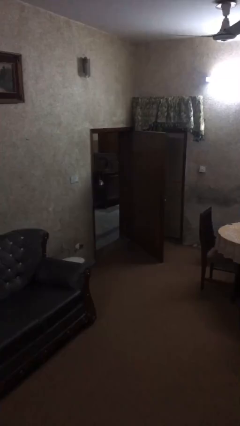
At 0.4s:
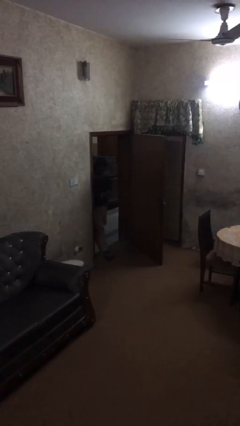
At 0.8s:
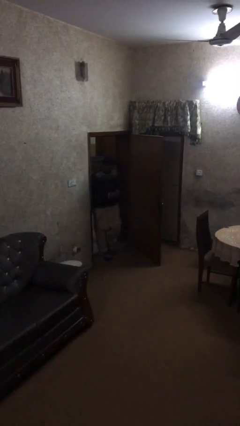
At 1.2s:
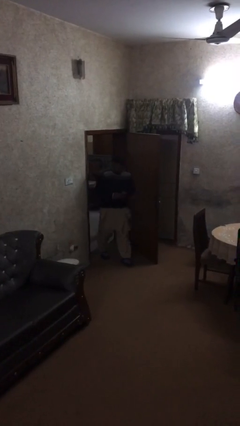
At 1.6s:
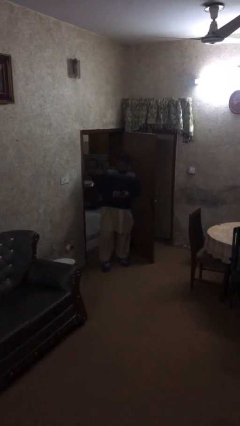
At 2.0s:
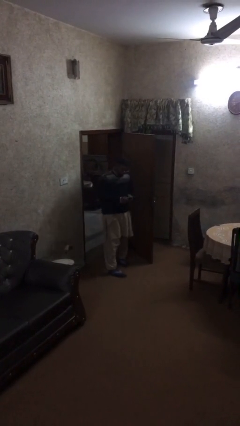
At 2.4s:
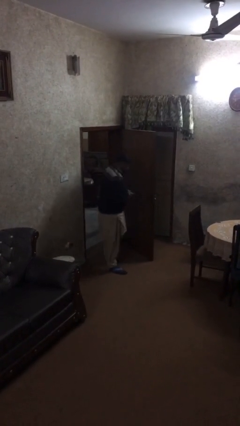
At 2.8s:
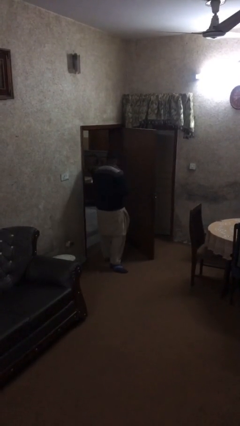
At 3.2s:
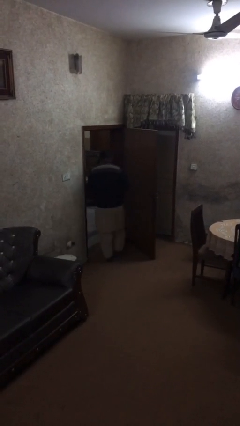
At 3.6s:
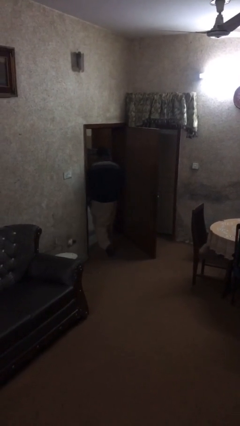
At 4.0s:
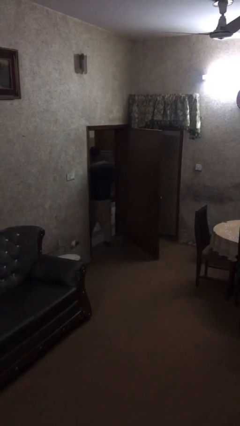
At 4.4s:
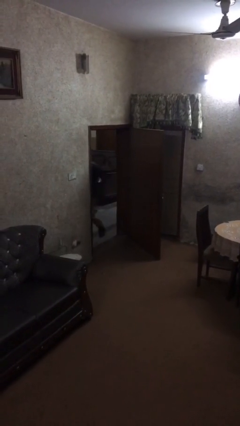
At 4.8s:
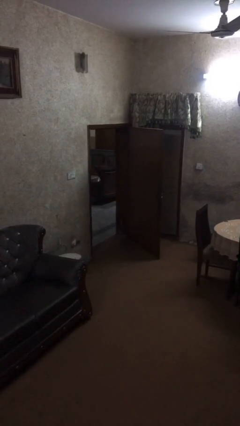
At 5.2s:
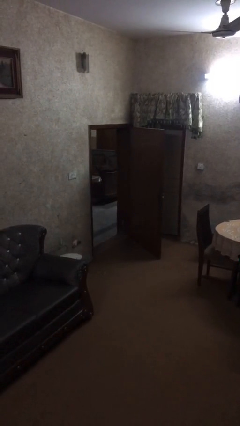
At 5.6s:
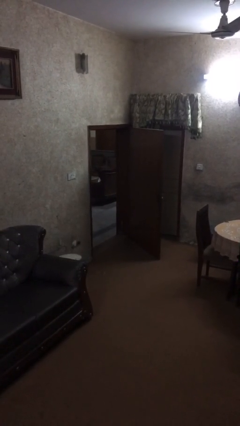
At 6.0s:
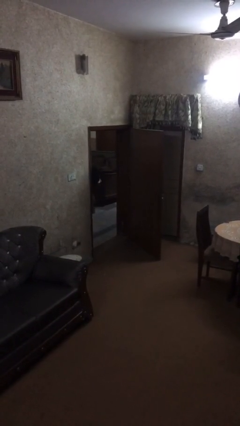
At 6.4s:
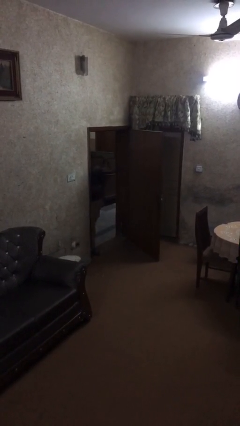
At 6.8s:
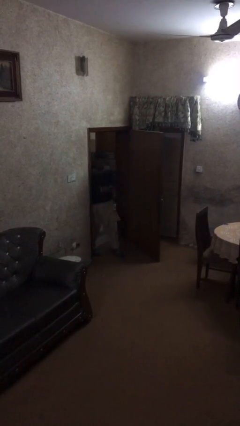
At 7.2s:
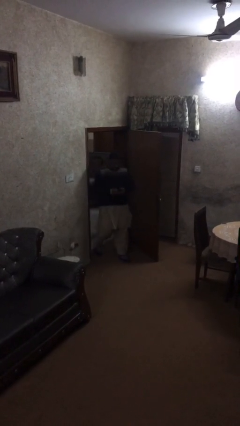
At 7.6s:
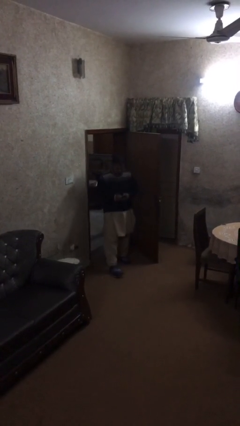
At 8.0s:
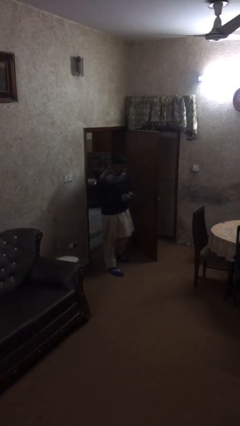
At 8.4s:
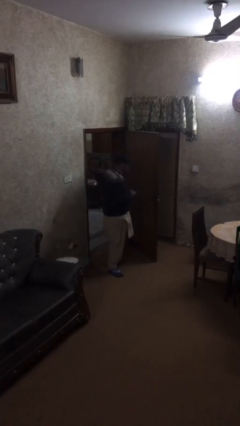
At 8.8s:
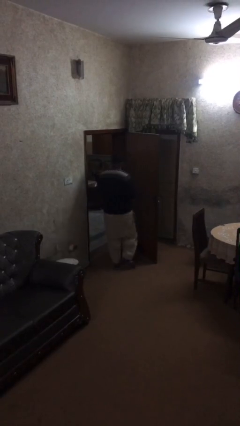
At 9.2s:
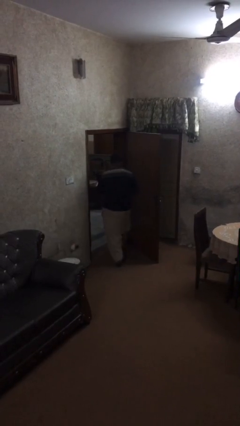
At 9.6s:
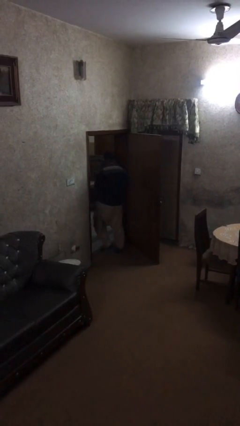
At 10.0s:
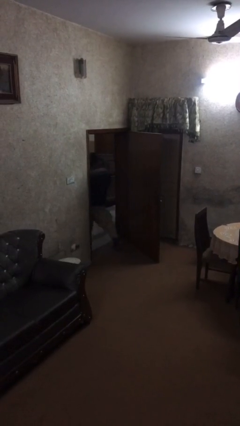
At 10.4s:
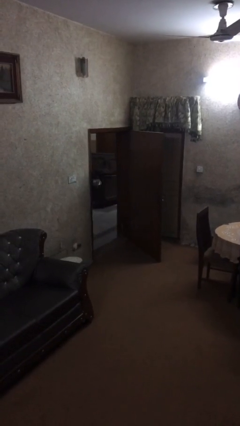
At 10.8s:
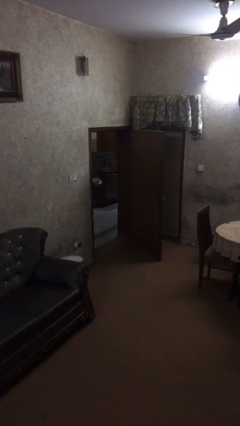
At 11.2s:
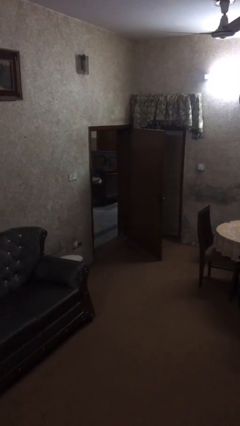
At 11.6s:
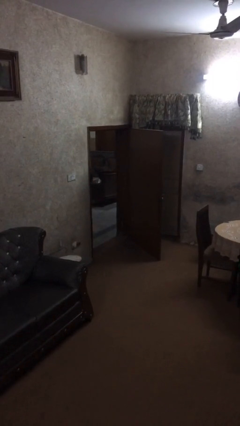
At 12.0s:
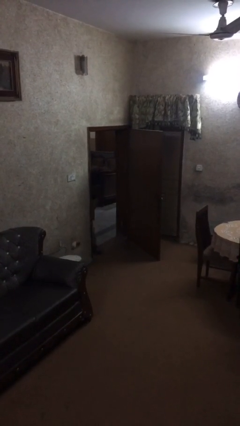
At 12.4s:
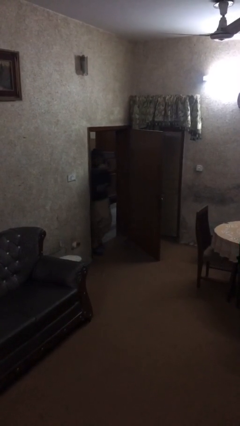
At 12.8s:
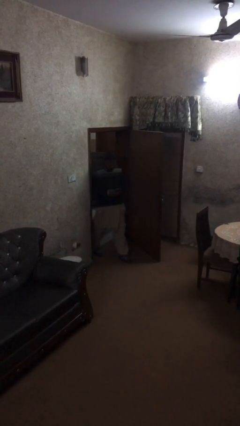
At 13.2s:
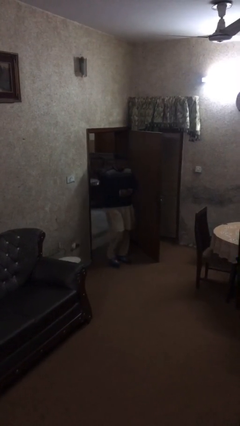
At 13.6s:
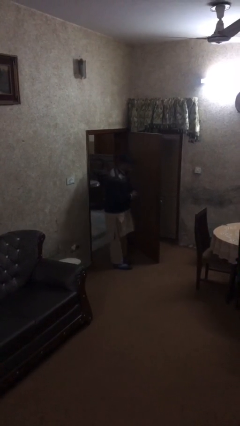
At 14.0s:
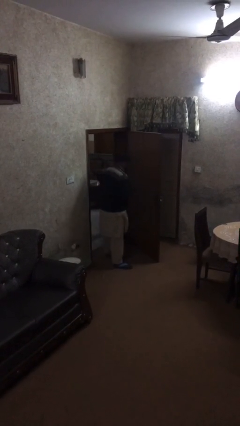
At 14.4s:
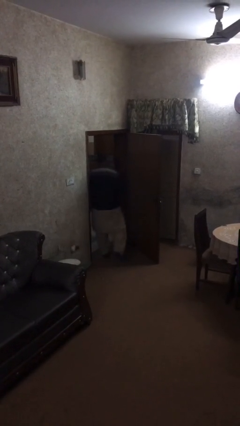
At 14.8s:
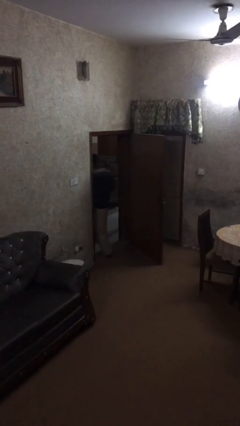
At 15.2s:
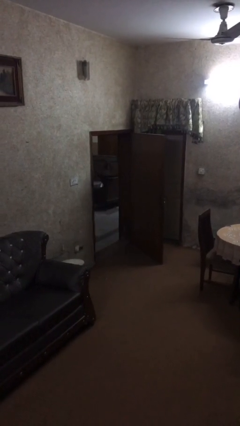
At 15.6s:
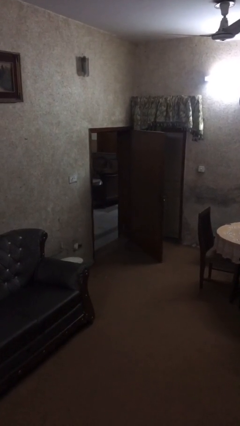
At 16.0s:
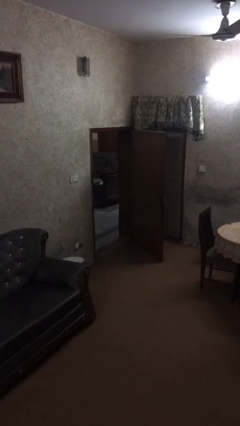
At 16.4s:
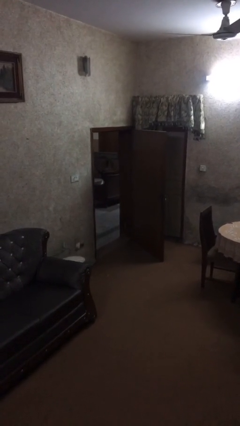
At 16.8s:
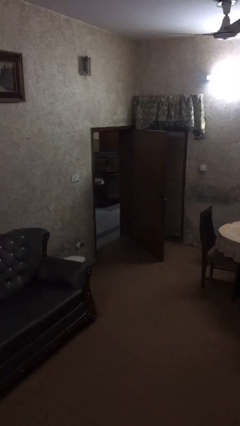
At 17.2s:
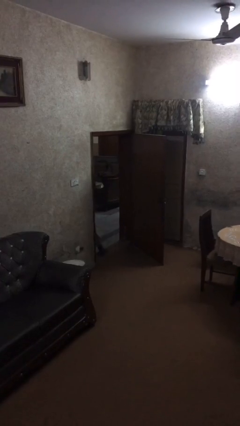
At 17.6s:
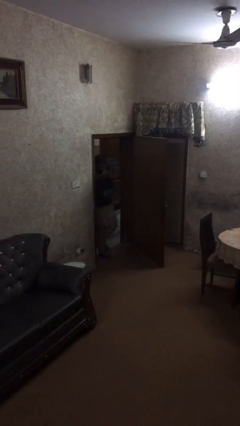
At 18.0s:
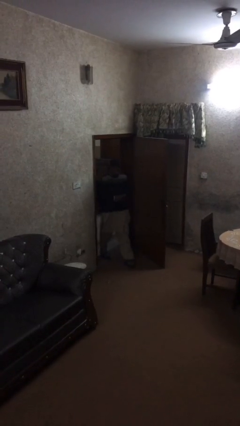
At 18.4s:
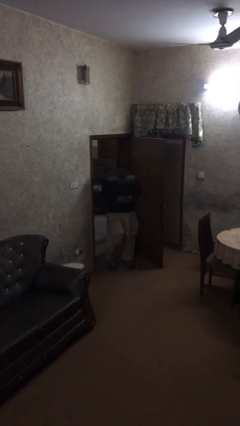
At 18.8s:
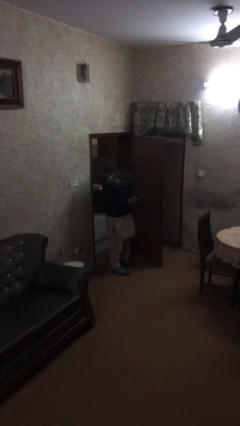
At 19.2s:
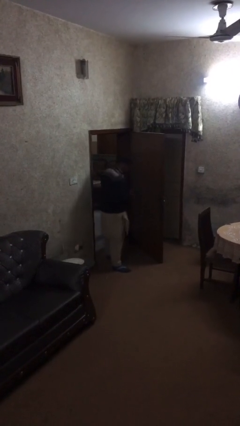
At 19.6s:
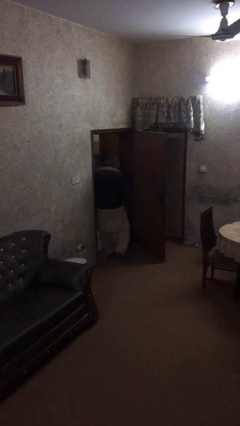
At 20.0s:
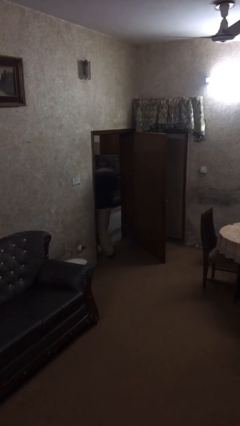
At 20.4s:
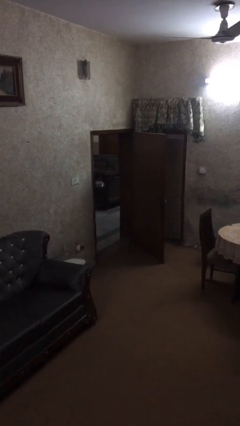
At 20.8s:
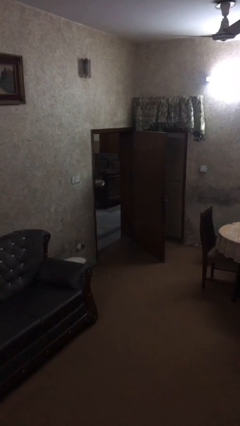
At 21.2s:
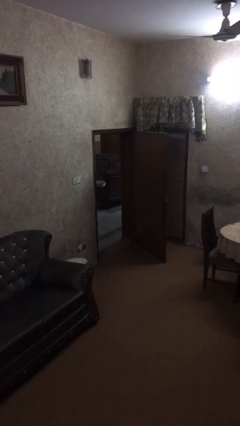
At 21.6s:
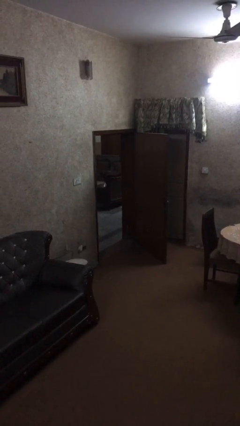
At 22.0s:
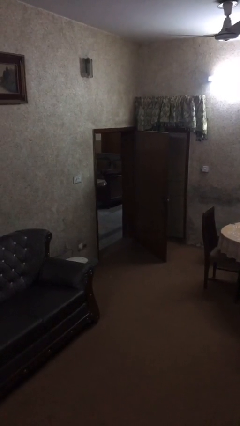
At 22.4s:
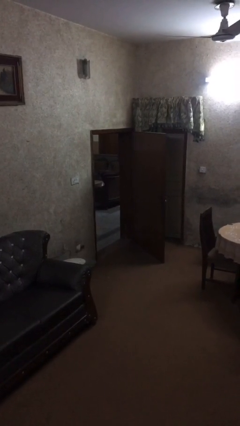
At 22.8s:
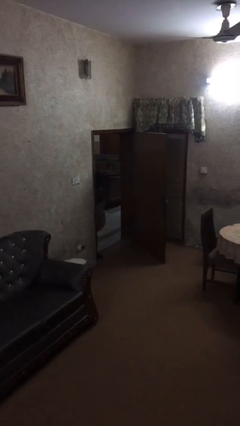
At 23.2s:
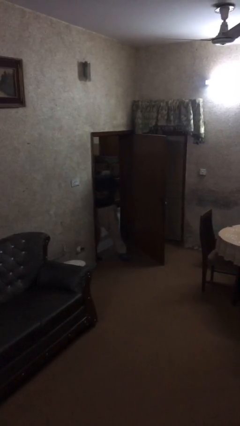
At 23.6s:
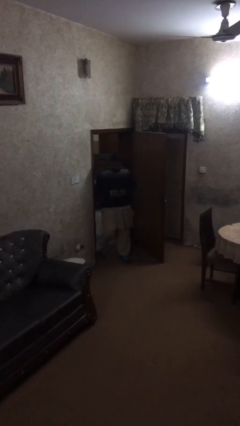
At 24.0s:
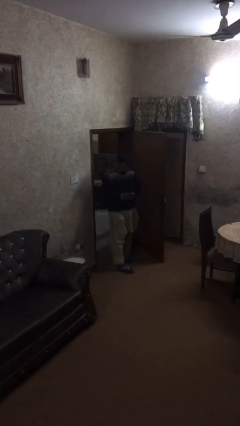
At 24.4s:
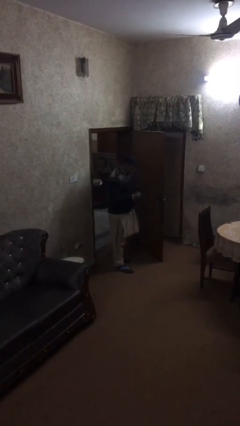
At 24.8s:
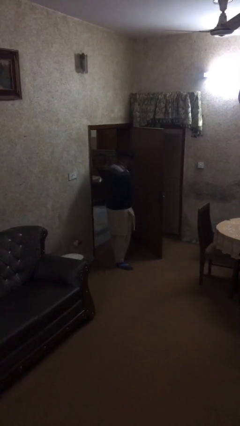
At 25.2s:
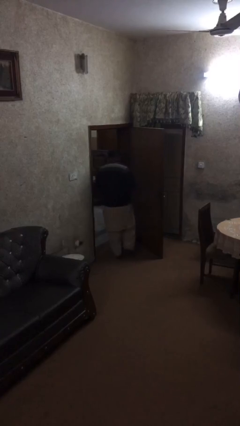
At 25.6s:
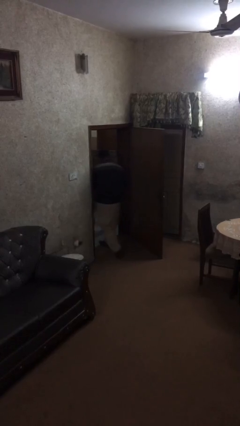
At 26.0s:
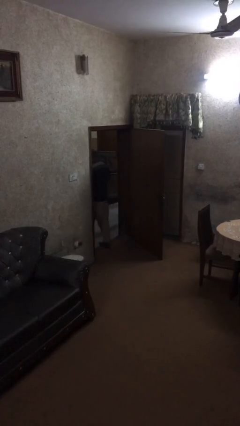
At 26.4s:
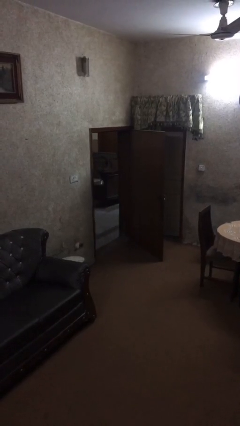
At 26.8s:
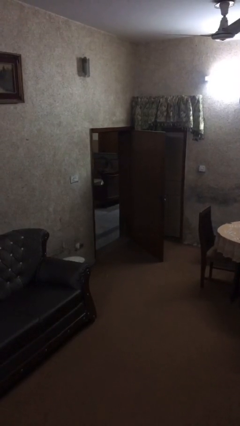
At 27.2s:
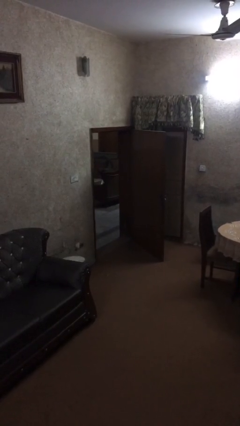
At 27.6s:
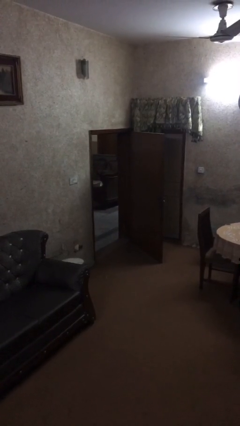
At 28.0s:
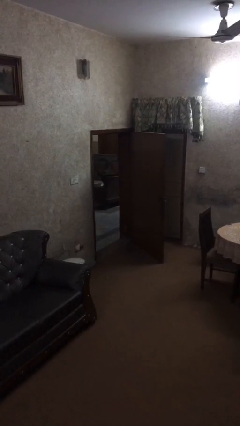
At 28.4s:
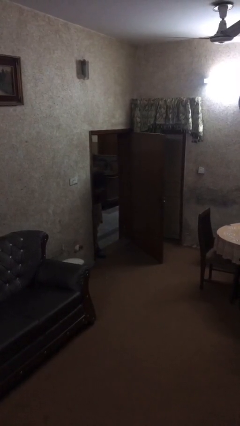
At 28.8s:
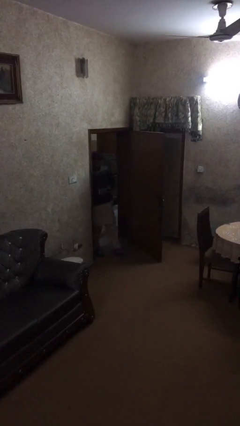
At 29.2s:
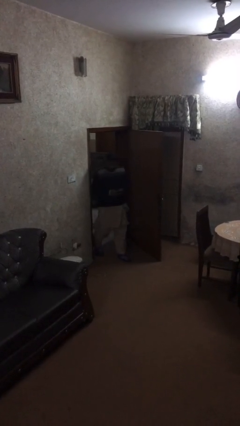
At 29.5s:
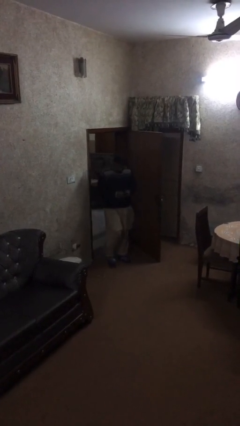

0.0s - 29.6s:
person texts on phone

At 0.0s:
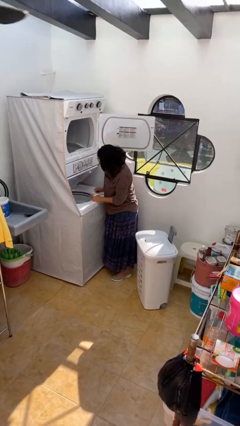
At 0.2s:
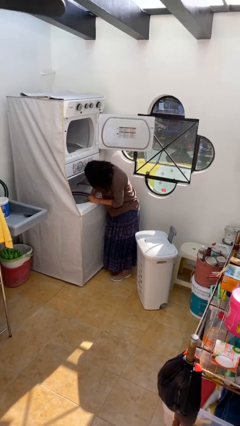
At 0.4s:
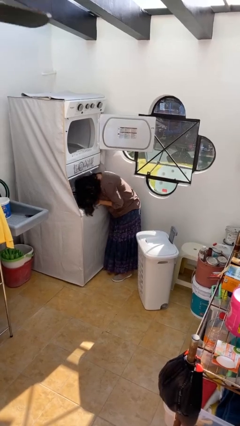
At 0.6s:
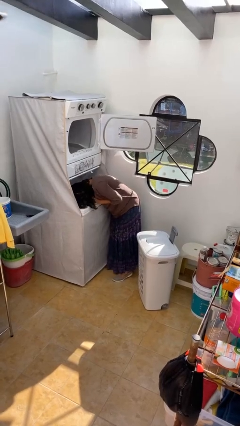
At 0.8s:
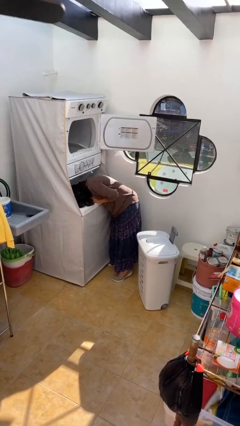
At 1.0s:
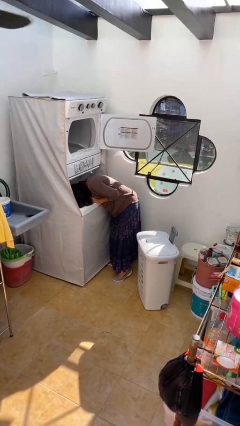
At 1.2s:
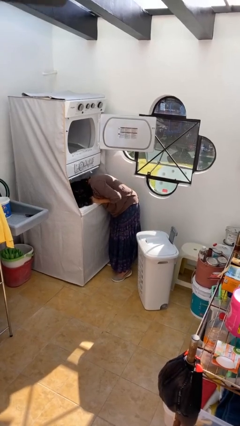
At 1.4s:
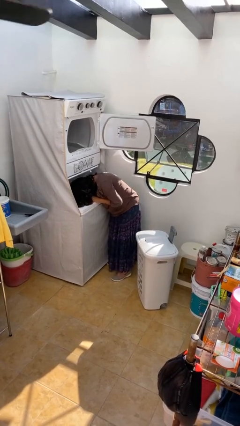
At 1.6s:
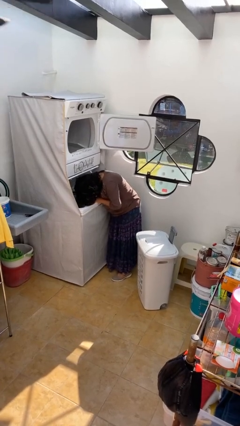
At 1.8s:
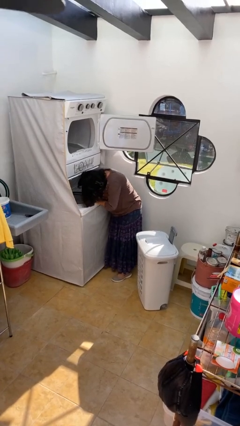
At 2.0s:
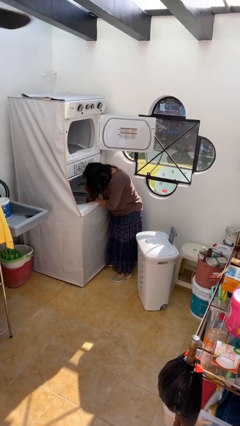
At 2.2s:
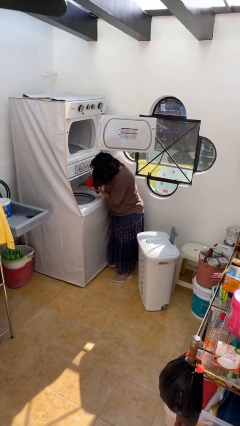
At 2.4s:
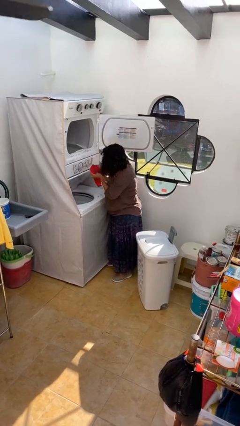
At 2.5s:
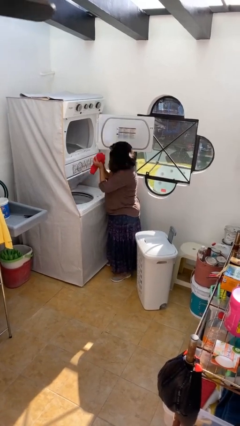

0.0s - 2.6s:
person unloads clotheswasher

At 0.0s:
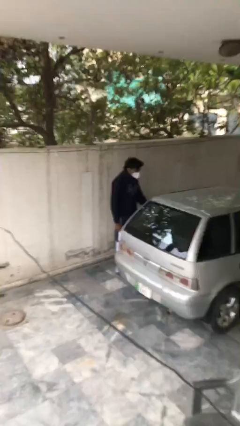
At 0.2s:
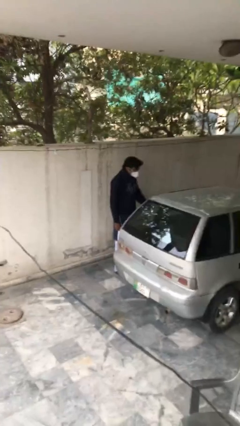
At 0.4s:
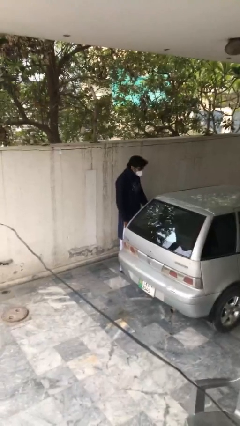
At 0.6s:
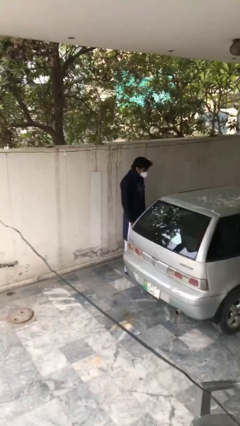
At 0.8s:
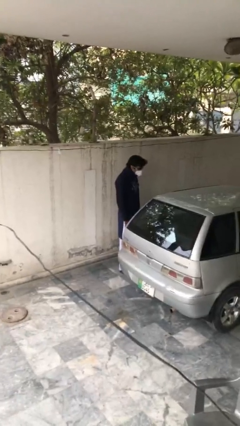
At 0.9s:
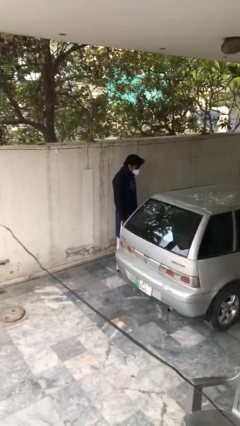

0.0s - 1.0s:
person closes car door
